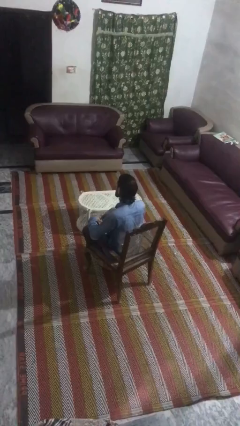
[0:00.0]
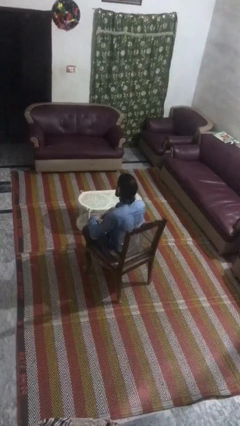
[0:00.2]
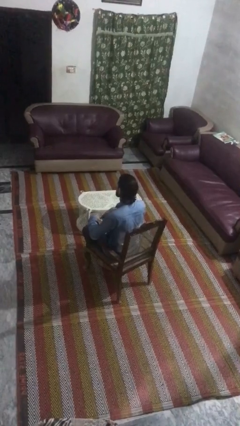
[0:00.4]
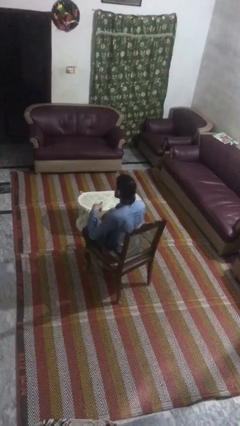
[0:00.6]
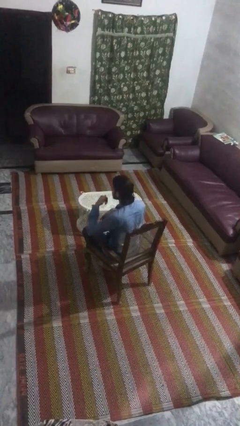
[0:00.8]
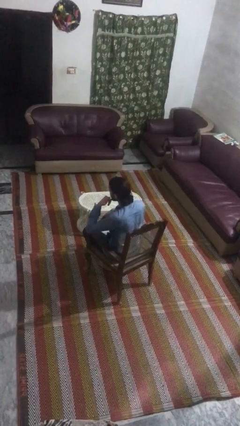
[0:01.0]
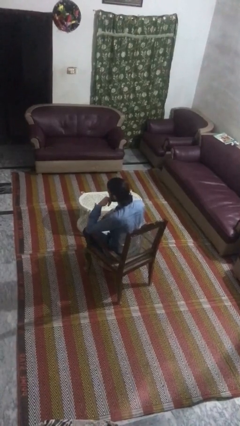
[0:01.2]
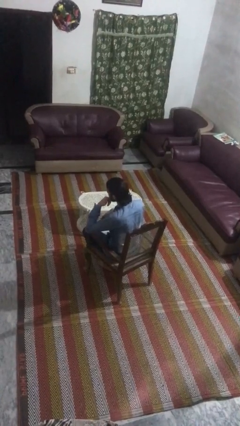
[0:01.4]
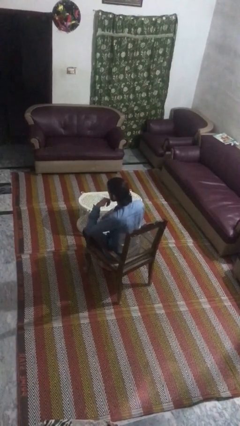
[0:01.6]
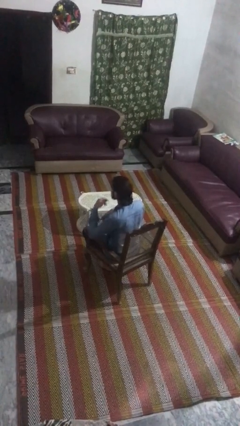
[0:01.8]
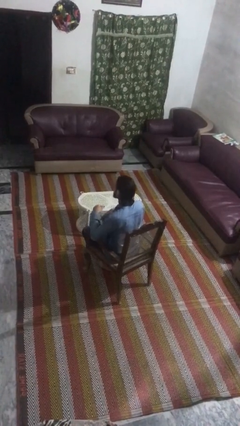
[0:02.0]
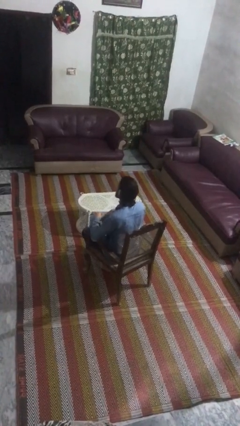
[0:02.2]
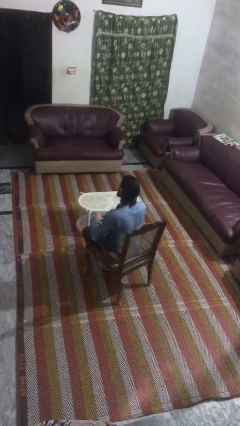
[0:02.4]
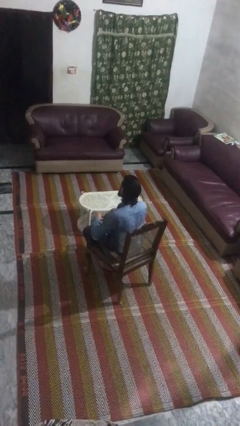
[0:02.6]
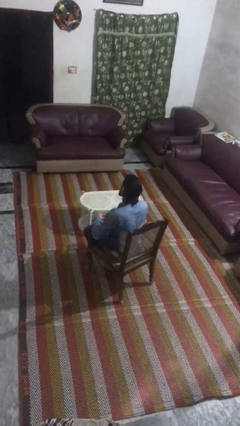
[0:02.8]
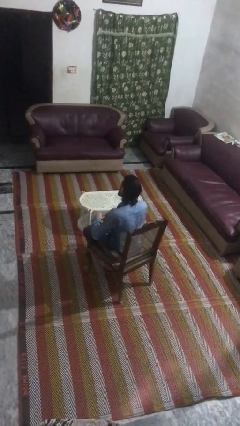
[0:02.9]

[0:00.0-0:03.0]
person gestures call me

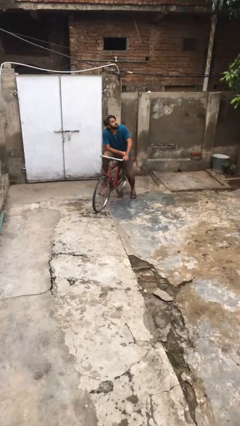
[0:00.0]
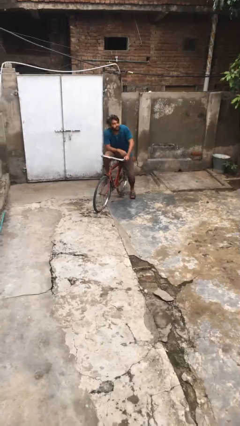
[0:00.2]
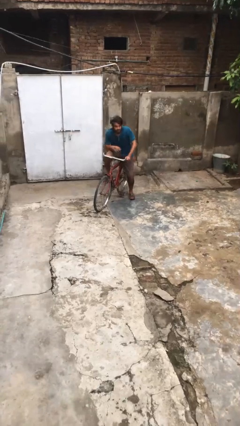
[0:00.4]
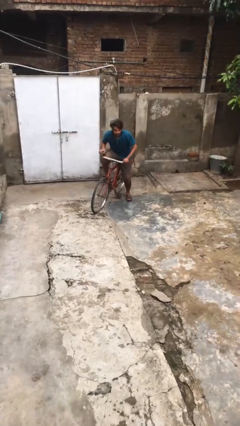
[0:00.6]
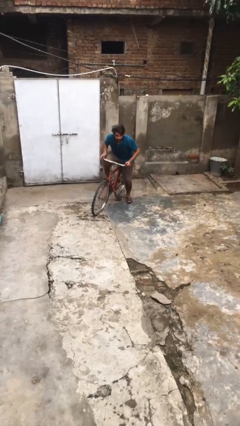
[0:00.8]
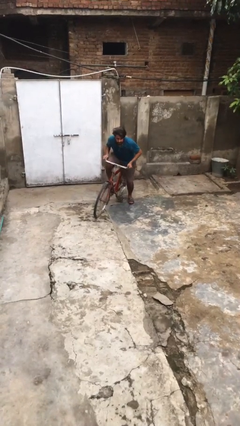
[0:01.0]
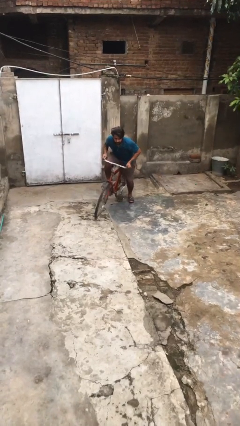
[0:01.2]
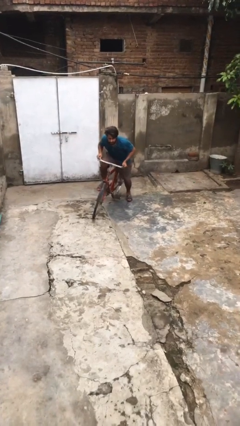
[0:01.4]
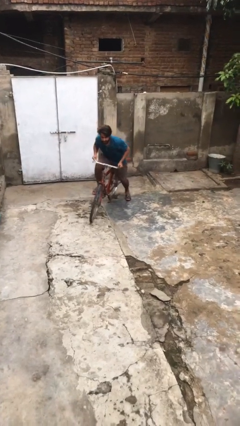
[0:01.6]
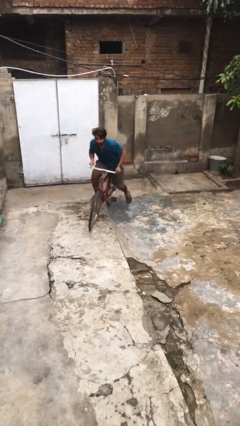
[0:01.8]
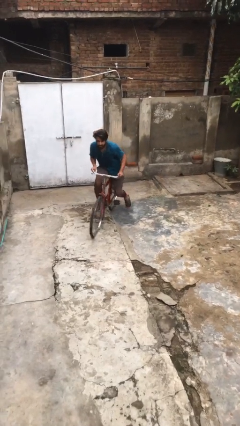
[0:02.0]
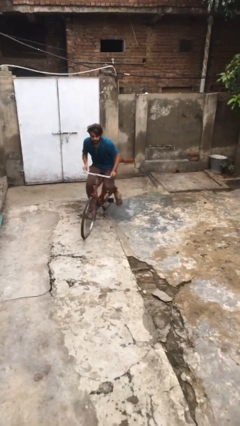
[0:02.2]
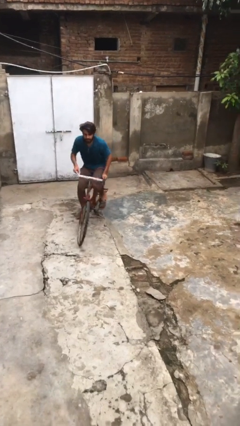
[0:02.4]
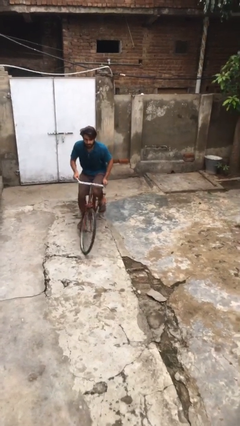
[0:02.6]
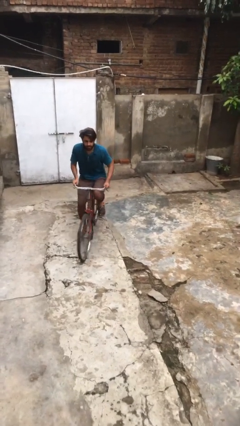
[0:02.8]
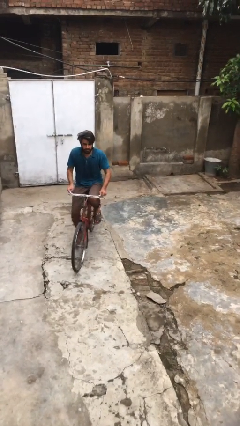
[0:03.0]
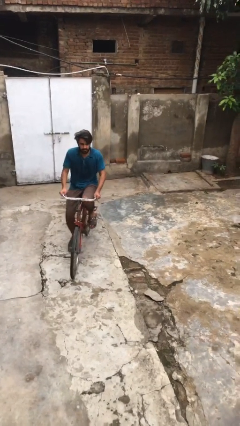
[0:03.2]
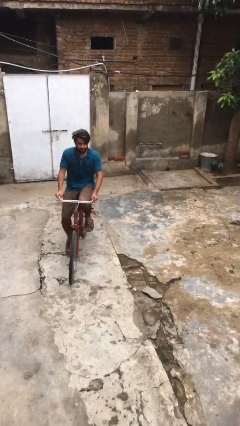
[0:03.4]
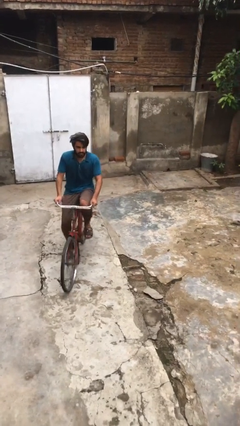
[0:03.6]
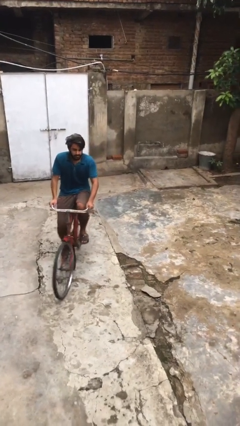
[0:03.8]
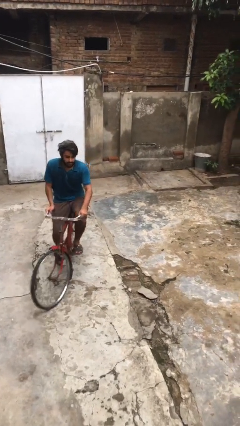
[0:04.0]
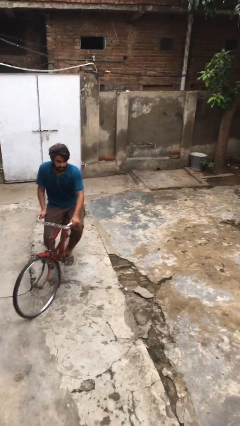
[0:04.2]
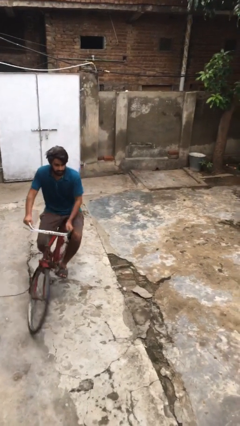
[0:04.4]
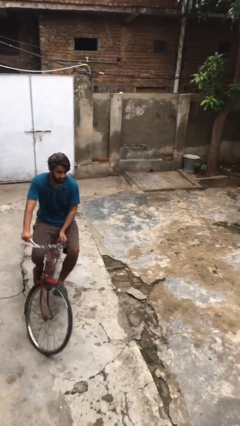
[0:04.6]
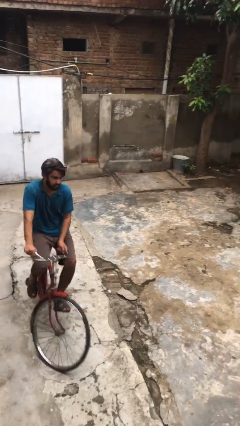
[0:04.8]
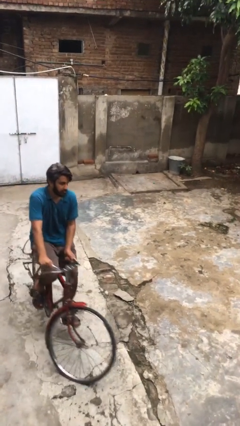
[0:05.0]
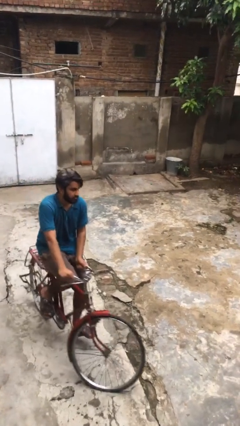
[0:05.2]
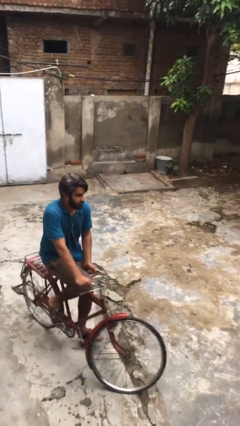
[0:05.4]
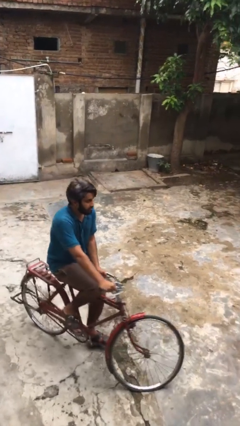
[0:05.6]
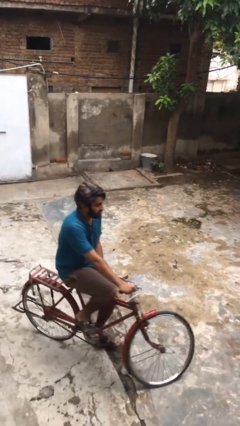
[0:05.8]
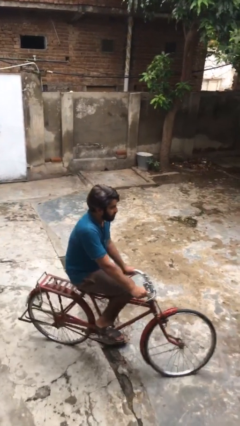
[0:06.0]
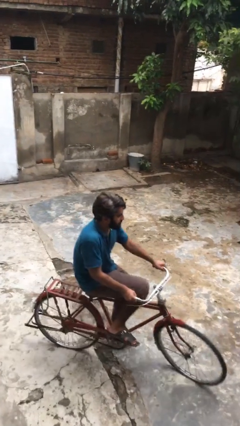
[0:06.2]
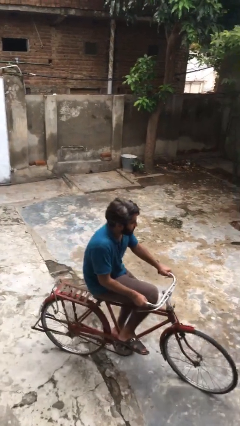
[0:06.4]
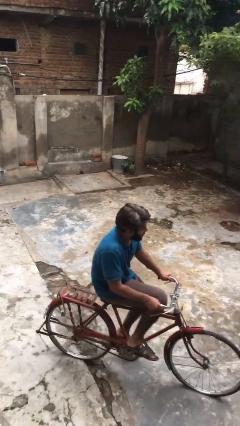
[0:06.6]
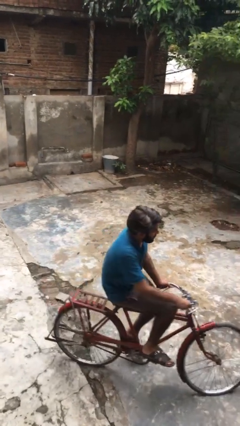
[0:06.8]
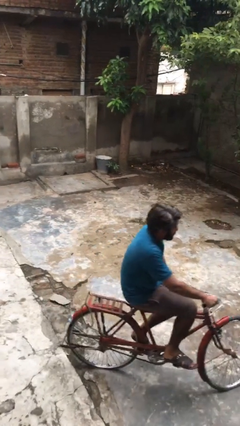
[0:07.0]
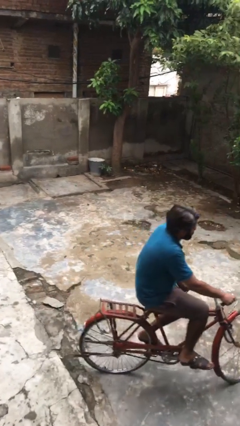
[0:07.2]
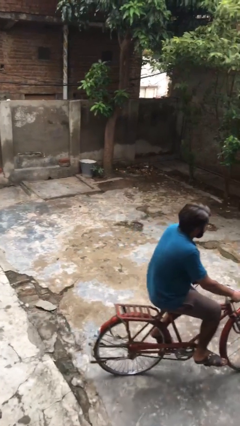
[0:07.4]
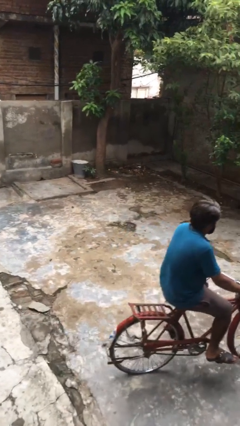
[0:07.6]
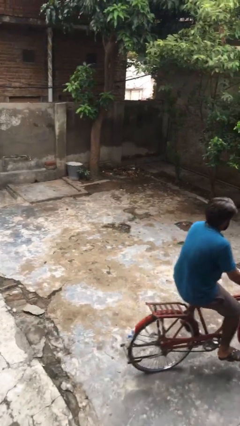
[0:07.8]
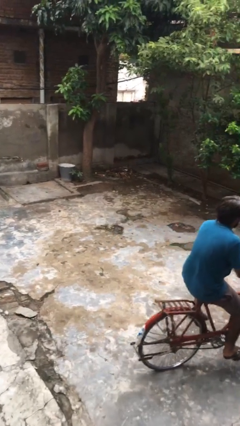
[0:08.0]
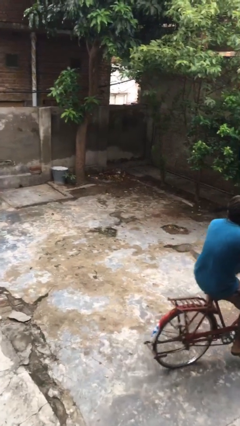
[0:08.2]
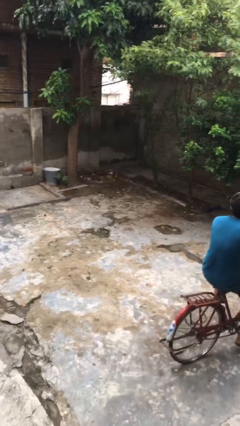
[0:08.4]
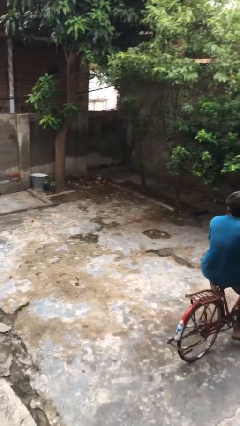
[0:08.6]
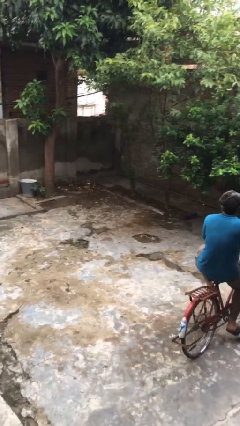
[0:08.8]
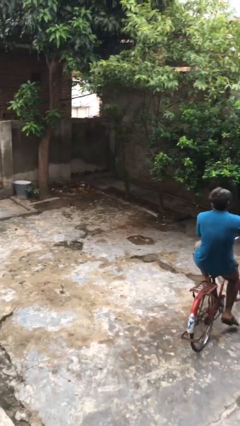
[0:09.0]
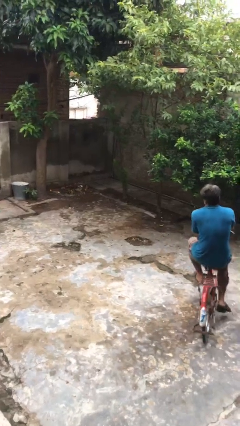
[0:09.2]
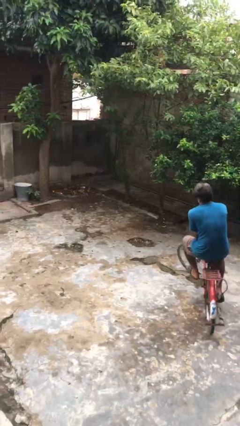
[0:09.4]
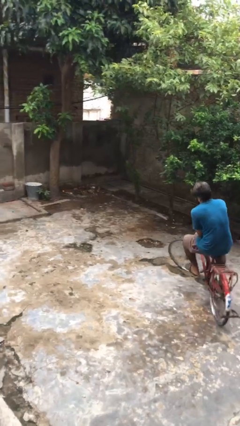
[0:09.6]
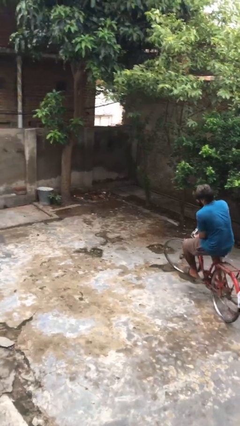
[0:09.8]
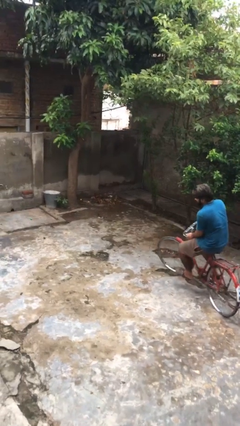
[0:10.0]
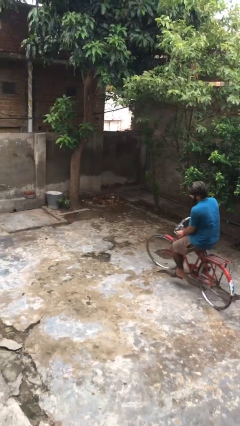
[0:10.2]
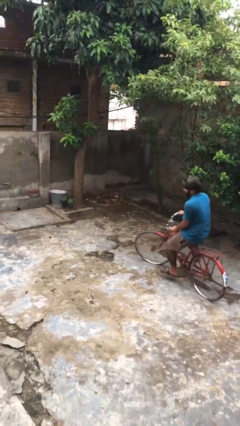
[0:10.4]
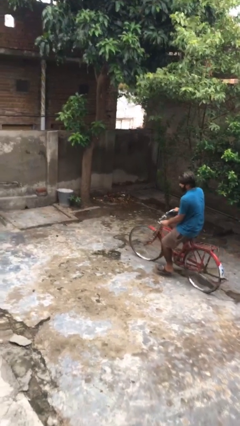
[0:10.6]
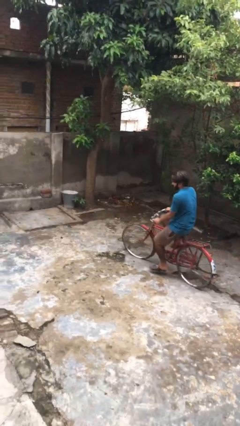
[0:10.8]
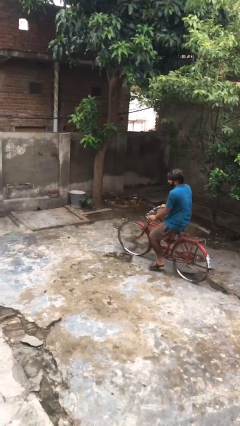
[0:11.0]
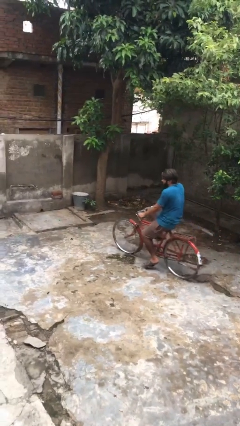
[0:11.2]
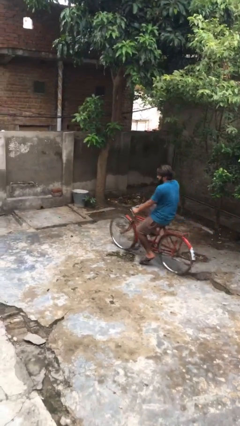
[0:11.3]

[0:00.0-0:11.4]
person rides bicycle

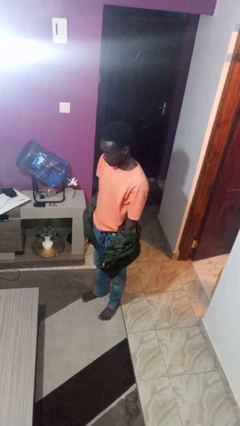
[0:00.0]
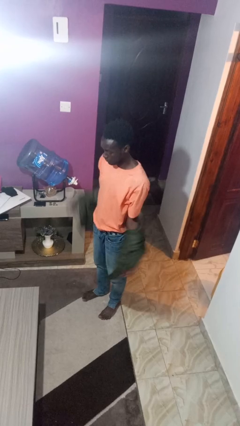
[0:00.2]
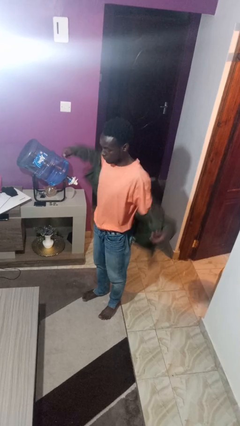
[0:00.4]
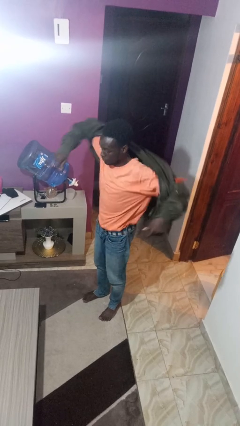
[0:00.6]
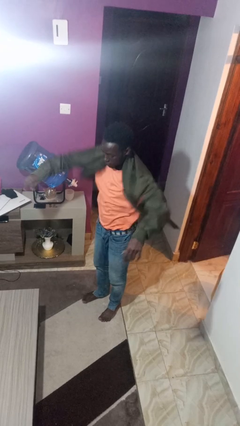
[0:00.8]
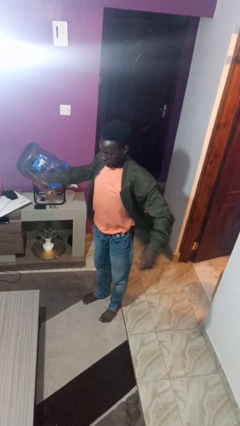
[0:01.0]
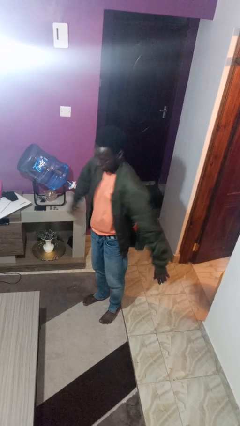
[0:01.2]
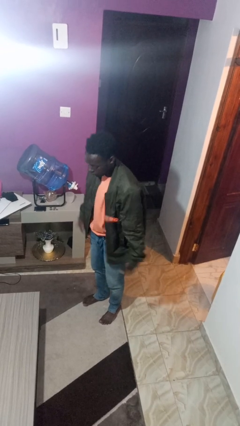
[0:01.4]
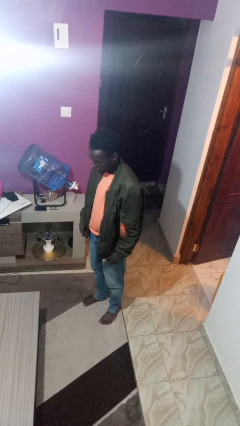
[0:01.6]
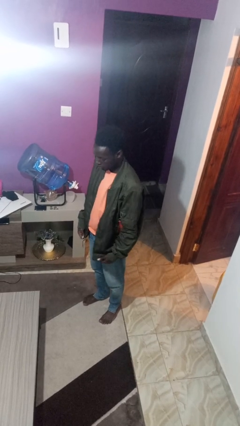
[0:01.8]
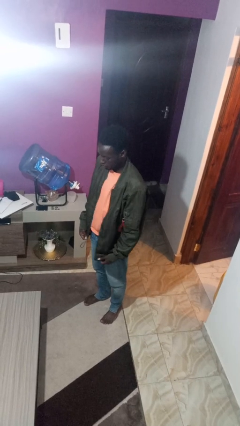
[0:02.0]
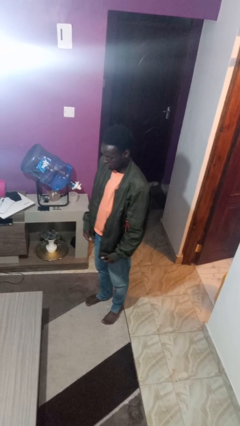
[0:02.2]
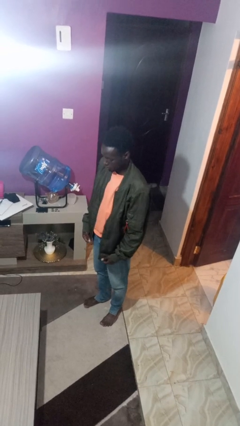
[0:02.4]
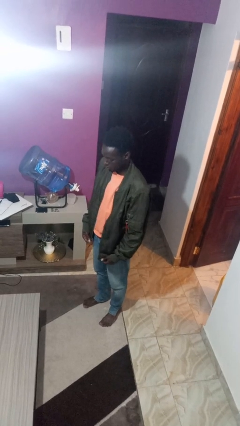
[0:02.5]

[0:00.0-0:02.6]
person puts on jacket

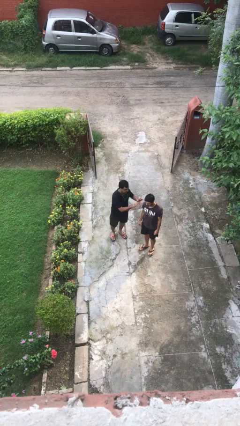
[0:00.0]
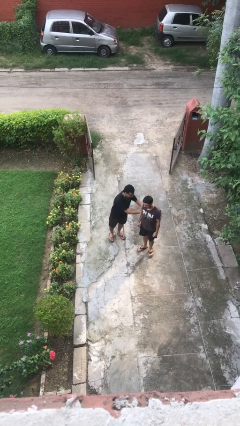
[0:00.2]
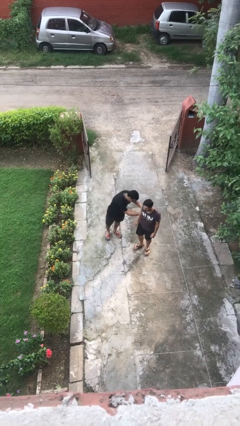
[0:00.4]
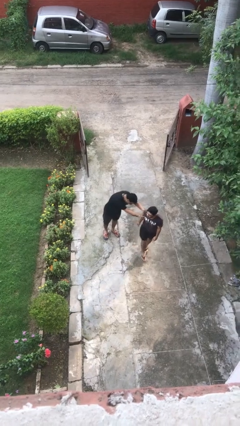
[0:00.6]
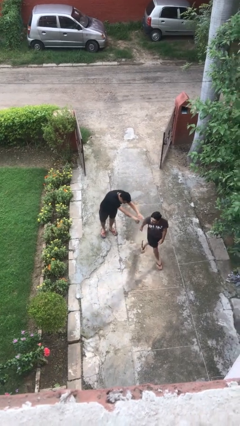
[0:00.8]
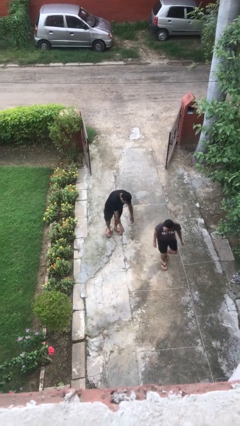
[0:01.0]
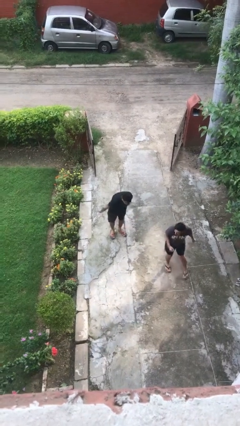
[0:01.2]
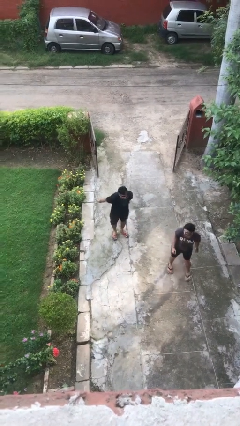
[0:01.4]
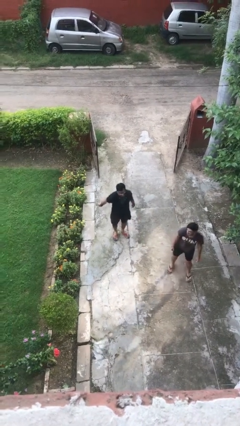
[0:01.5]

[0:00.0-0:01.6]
person shoves person
